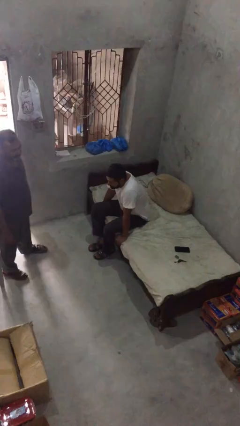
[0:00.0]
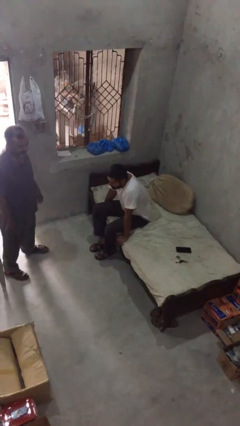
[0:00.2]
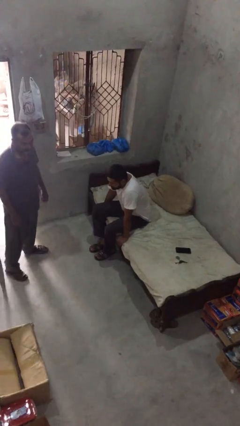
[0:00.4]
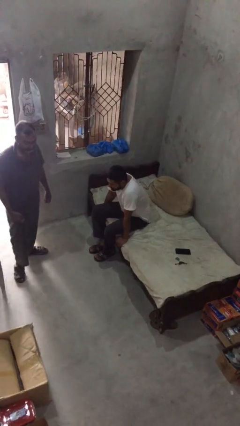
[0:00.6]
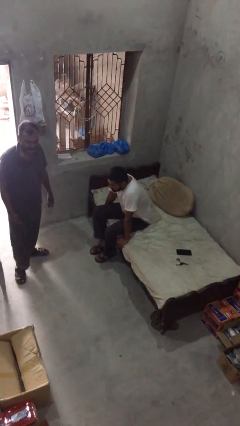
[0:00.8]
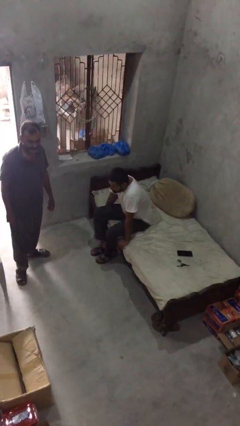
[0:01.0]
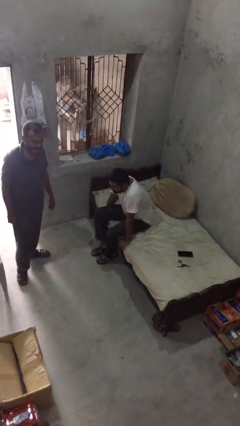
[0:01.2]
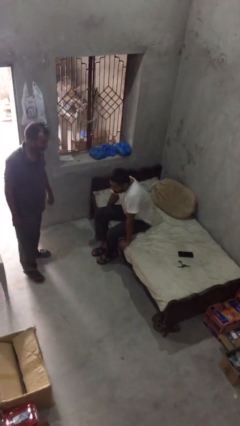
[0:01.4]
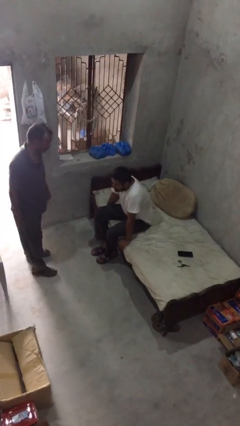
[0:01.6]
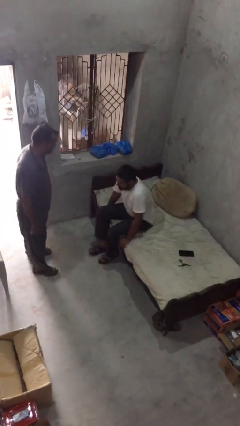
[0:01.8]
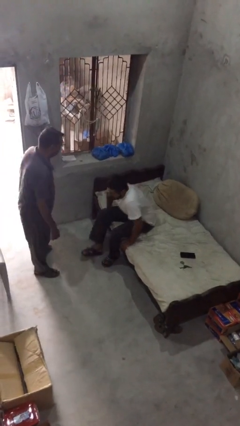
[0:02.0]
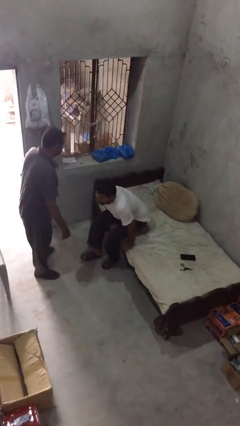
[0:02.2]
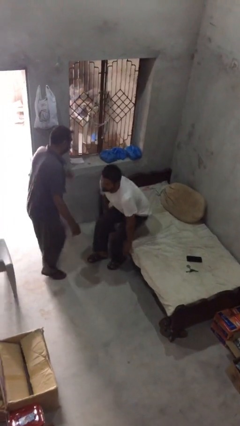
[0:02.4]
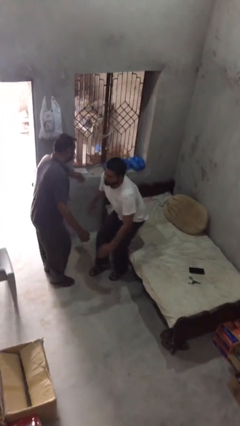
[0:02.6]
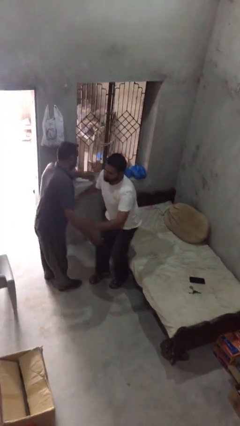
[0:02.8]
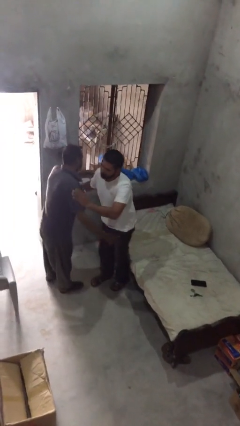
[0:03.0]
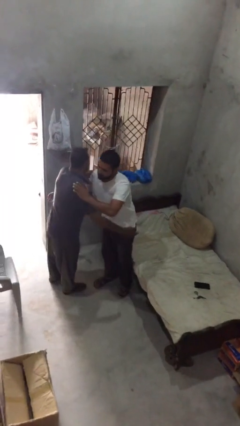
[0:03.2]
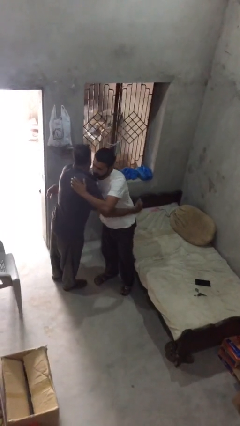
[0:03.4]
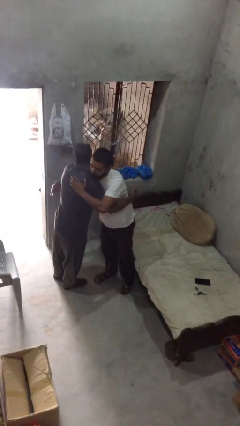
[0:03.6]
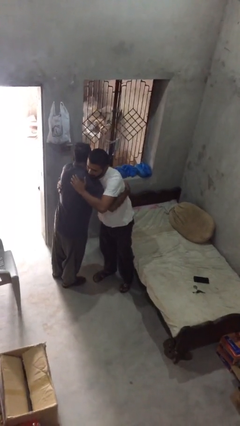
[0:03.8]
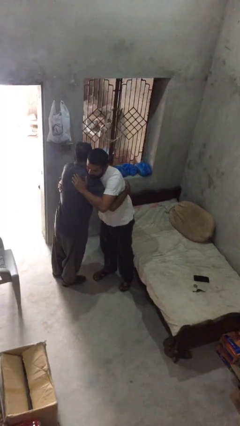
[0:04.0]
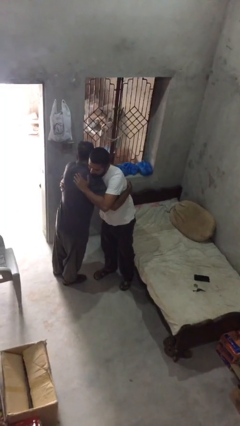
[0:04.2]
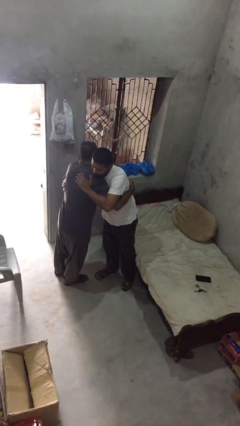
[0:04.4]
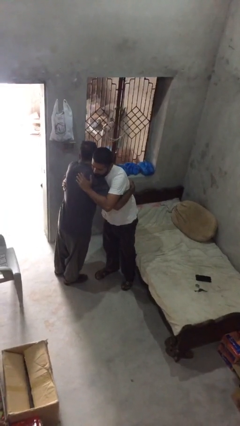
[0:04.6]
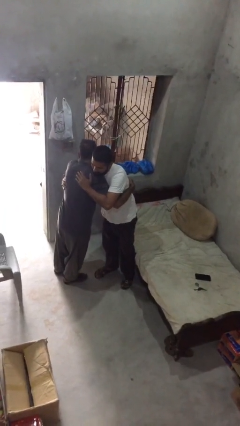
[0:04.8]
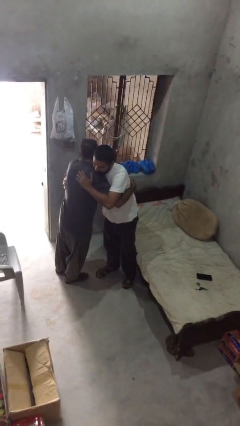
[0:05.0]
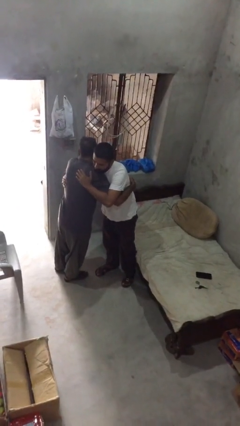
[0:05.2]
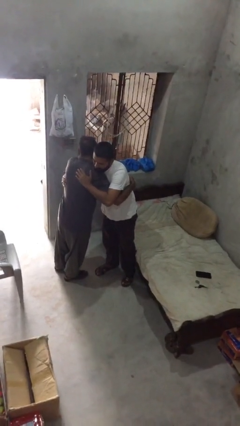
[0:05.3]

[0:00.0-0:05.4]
person embraces person

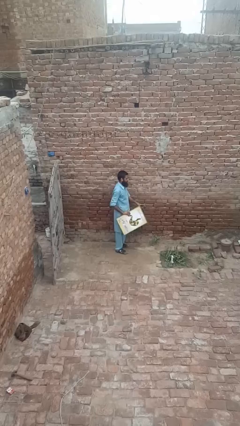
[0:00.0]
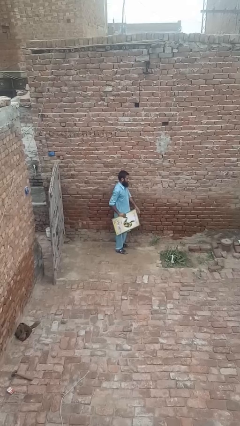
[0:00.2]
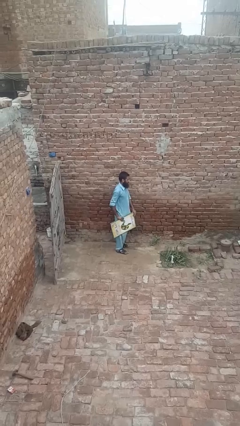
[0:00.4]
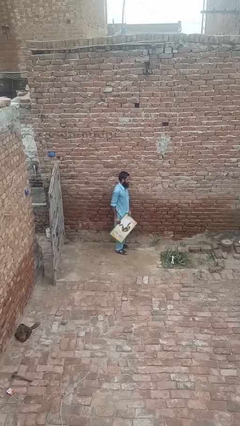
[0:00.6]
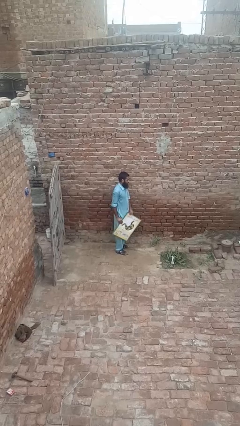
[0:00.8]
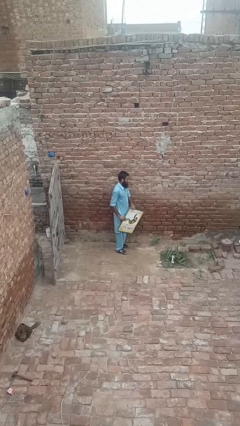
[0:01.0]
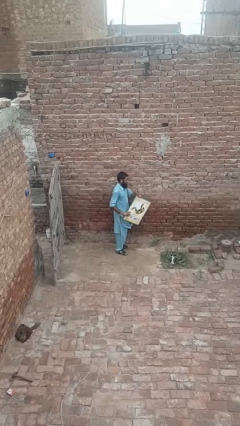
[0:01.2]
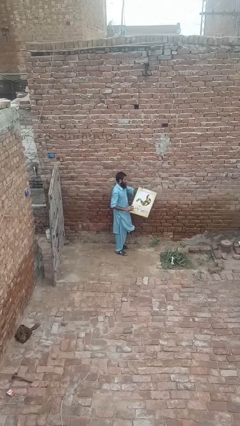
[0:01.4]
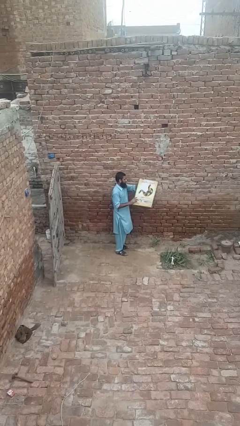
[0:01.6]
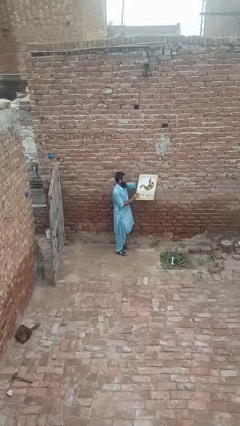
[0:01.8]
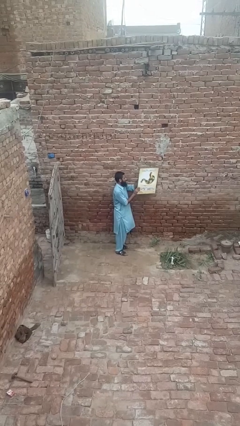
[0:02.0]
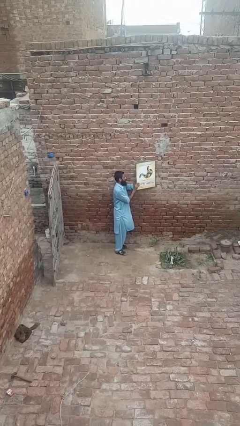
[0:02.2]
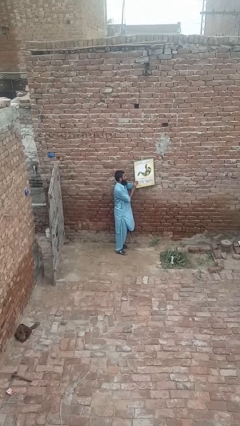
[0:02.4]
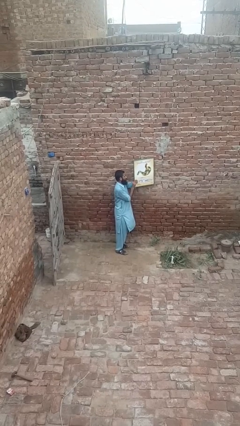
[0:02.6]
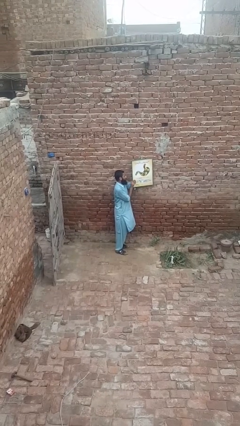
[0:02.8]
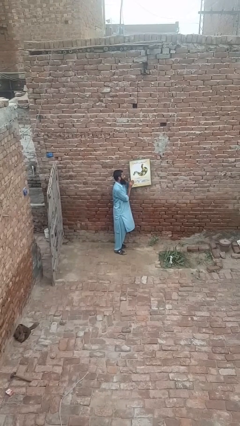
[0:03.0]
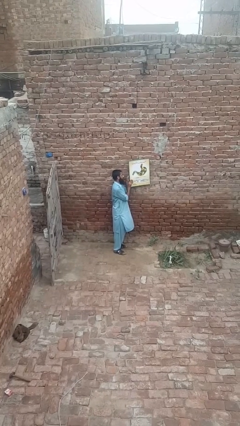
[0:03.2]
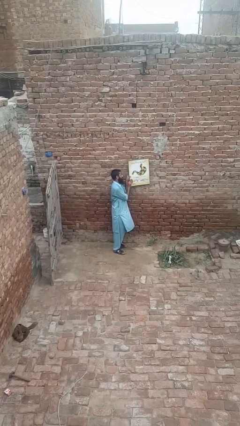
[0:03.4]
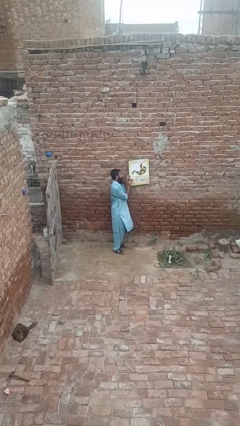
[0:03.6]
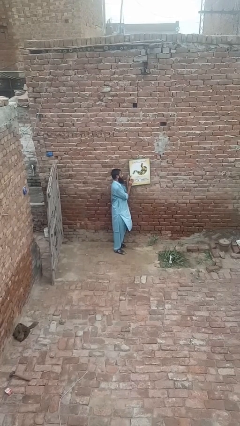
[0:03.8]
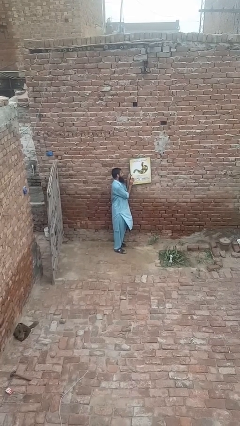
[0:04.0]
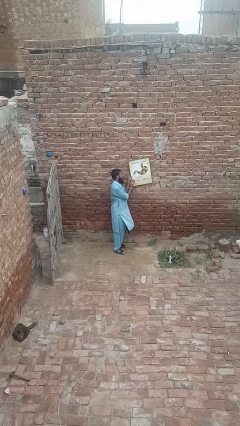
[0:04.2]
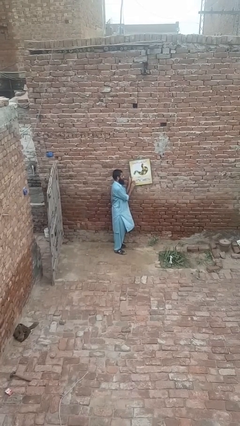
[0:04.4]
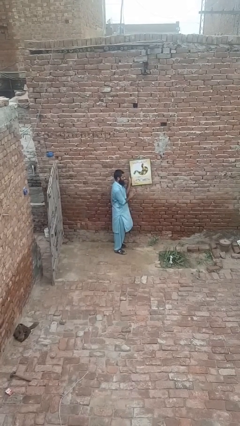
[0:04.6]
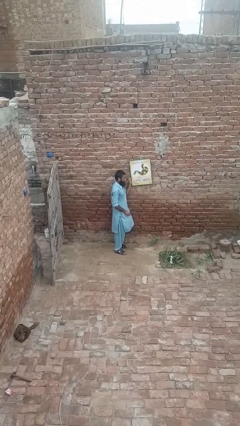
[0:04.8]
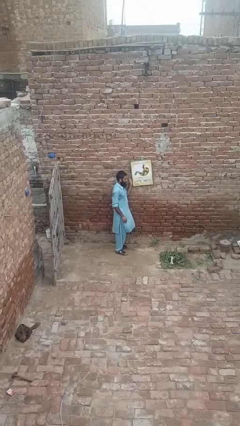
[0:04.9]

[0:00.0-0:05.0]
person puts up picture frame

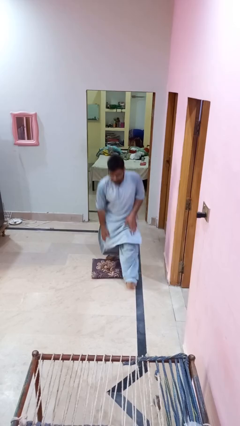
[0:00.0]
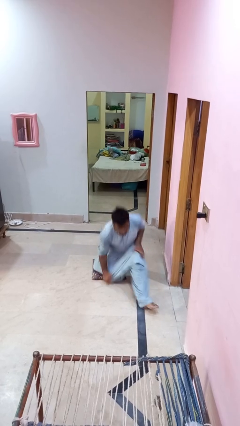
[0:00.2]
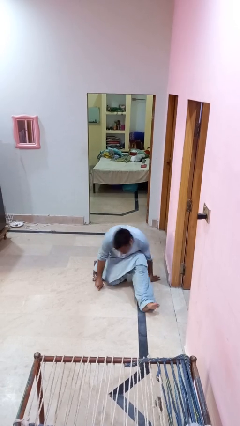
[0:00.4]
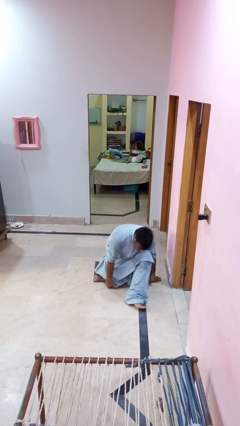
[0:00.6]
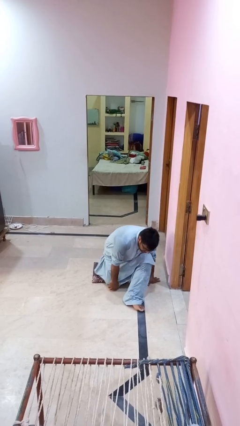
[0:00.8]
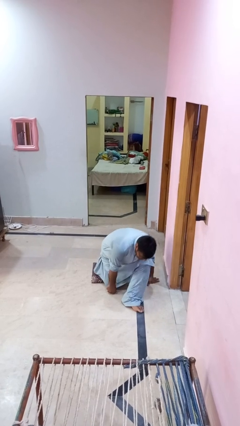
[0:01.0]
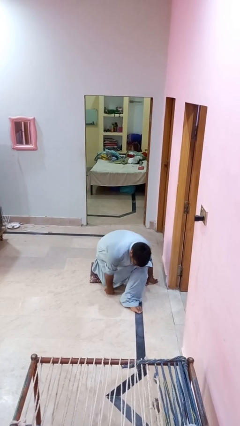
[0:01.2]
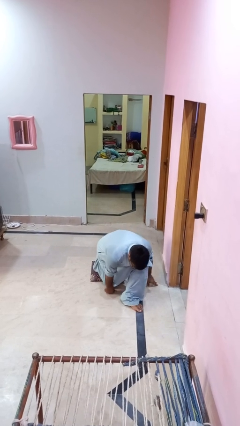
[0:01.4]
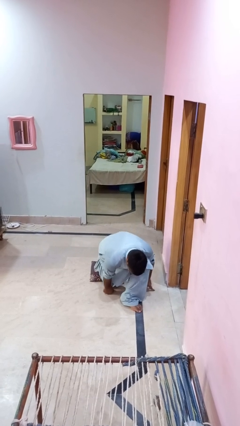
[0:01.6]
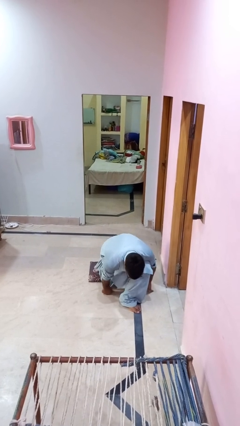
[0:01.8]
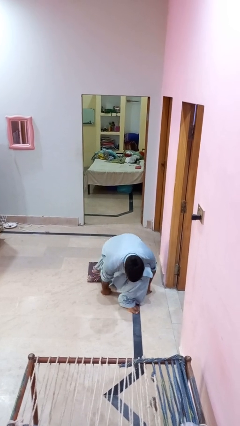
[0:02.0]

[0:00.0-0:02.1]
person trips on object on floor

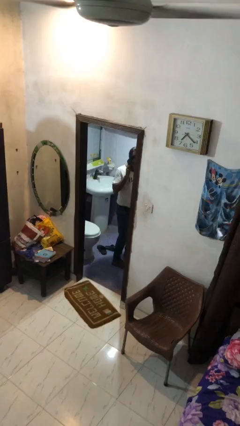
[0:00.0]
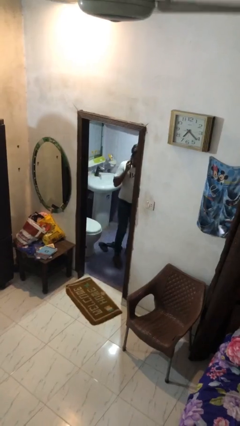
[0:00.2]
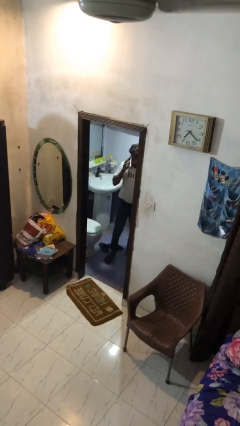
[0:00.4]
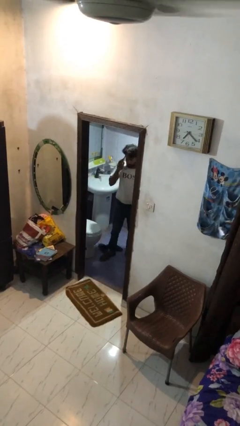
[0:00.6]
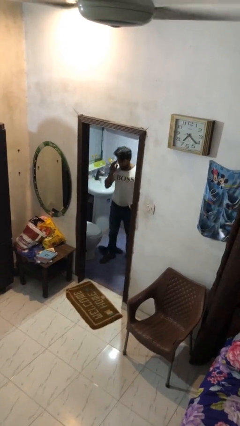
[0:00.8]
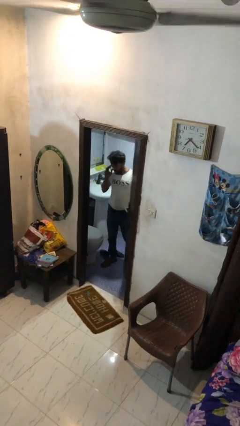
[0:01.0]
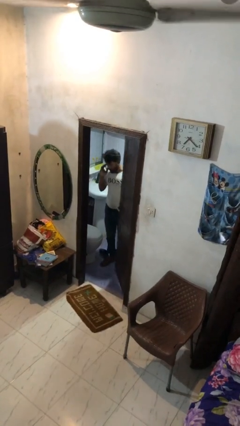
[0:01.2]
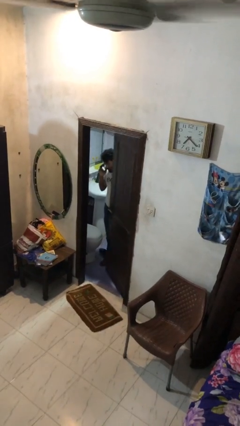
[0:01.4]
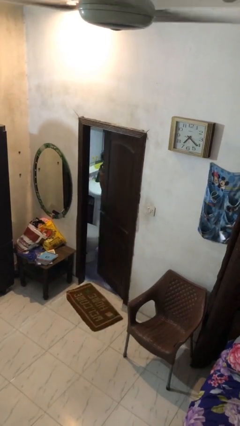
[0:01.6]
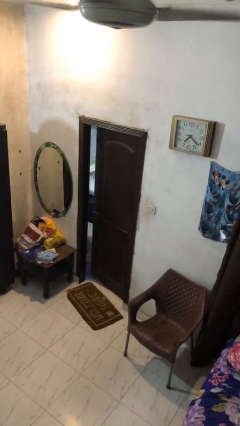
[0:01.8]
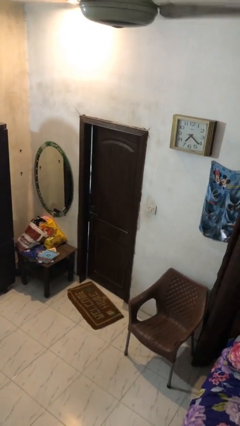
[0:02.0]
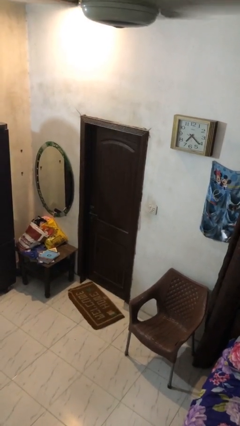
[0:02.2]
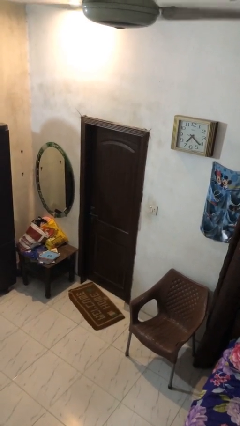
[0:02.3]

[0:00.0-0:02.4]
person closes facility door

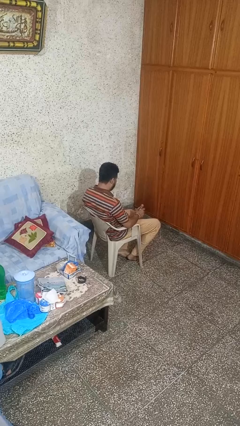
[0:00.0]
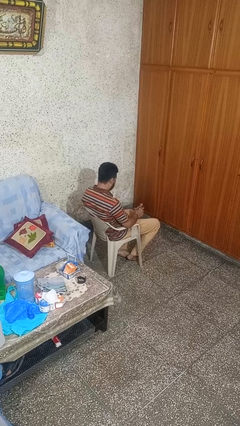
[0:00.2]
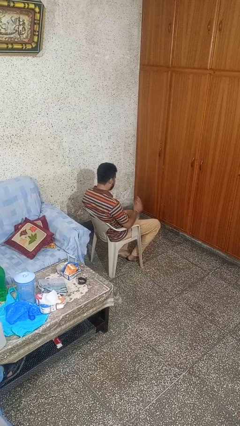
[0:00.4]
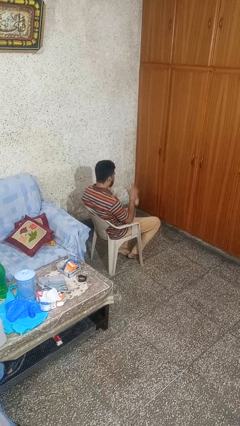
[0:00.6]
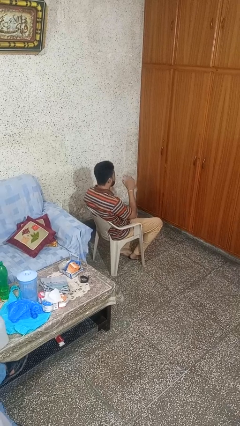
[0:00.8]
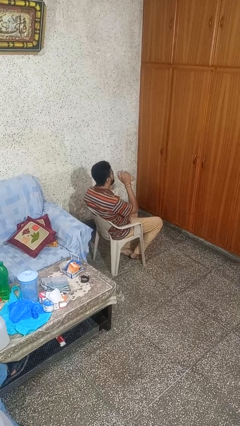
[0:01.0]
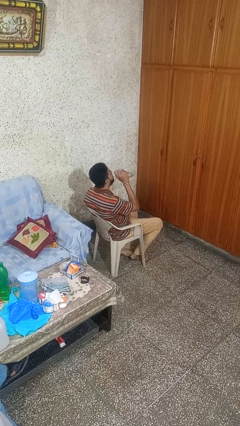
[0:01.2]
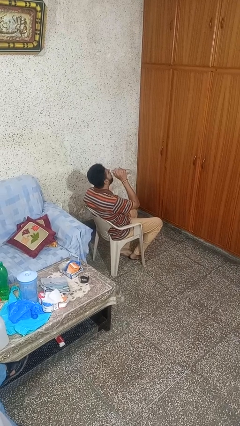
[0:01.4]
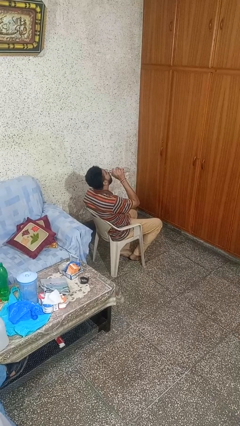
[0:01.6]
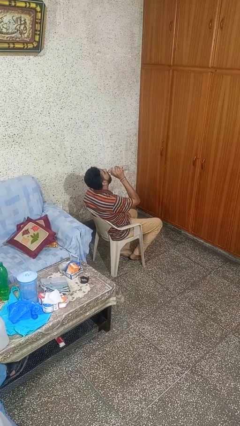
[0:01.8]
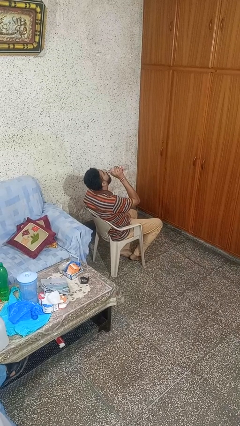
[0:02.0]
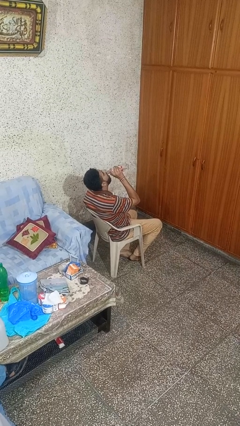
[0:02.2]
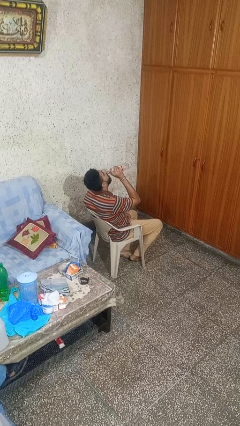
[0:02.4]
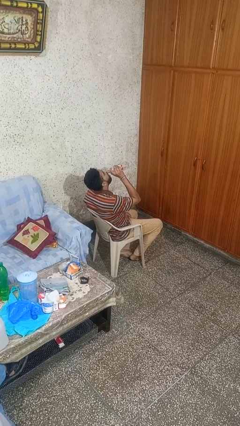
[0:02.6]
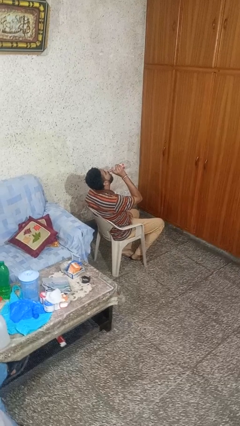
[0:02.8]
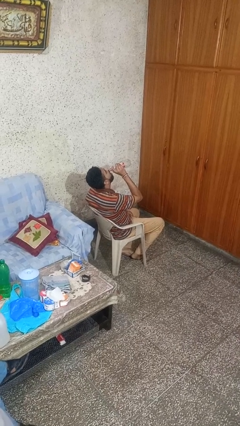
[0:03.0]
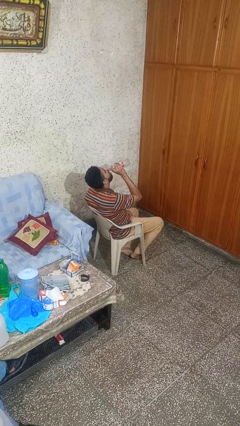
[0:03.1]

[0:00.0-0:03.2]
person drinks from bottle
